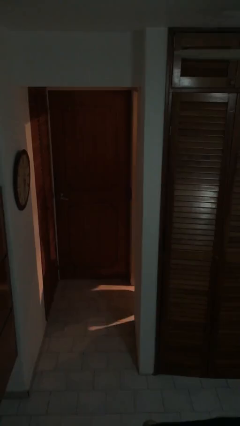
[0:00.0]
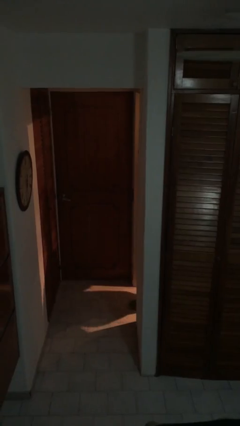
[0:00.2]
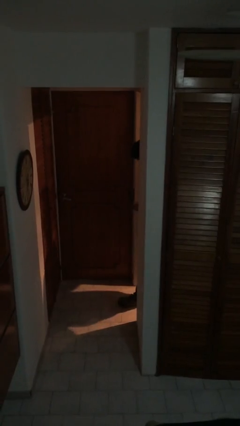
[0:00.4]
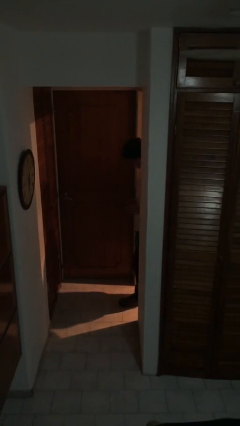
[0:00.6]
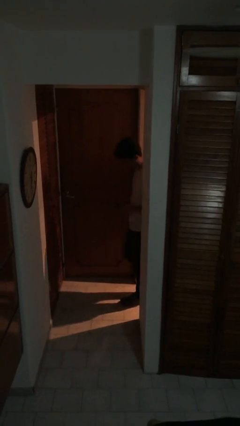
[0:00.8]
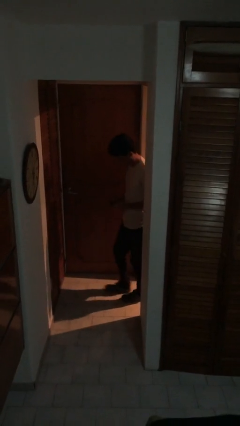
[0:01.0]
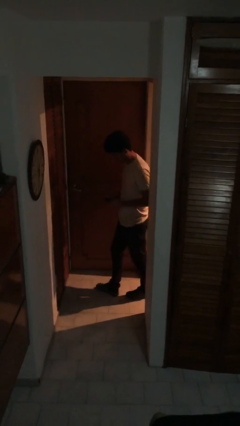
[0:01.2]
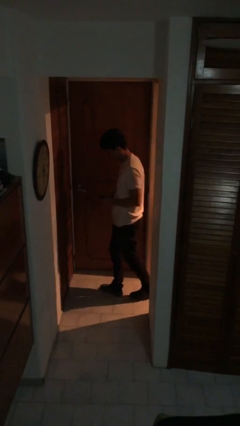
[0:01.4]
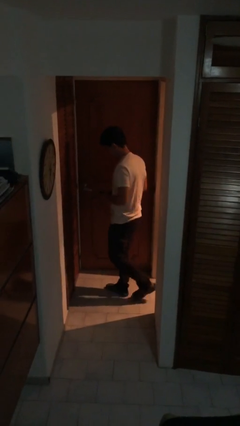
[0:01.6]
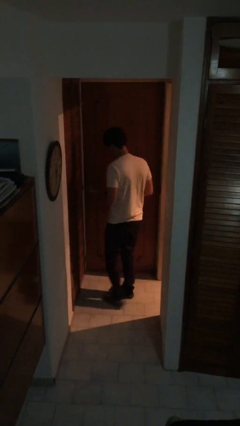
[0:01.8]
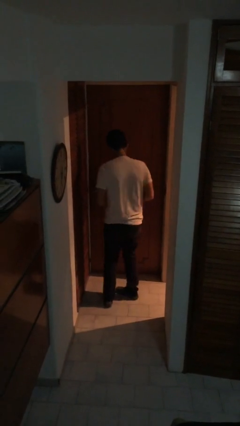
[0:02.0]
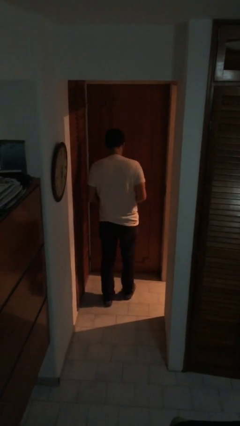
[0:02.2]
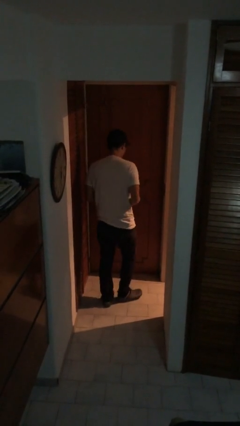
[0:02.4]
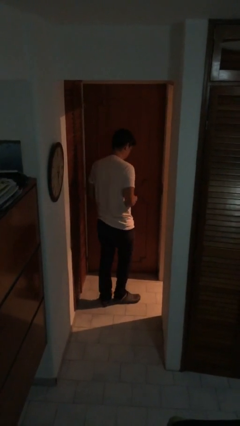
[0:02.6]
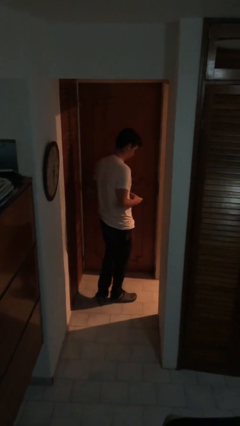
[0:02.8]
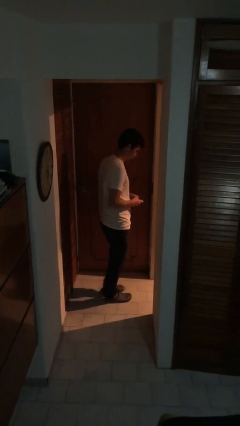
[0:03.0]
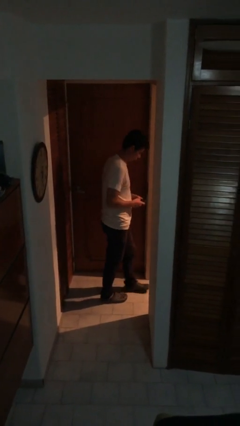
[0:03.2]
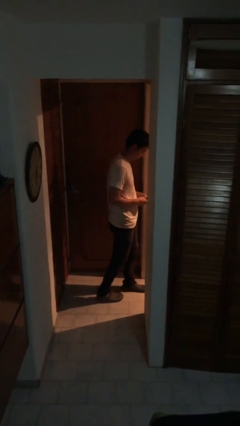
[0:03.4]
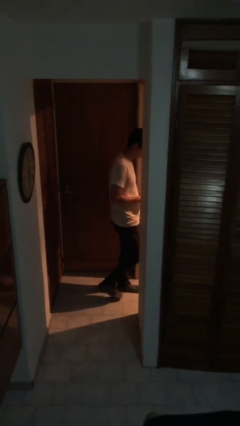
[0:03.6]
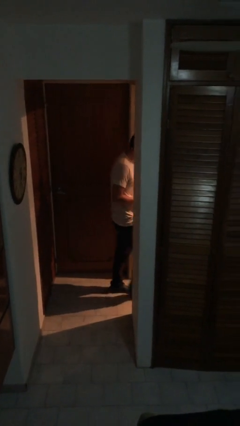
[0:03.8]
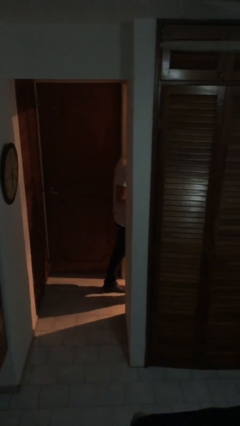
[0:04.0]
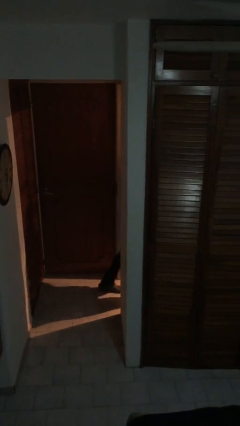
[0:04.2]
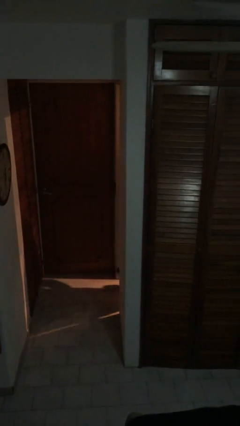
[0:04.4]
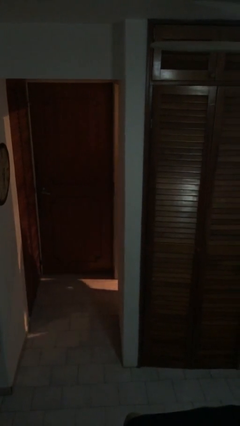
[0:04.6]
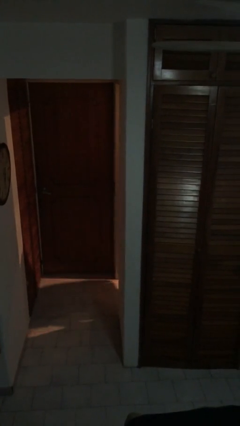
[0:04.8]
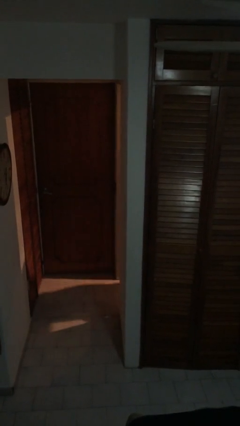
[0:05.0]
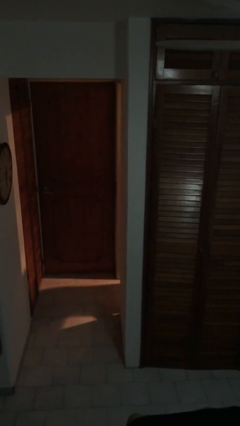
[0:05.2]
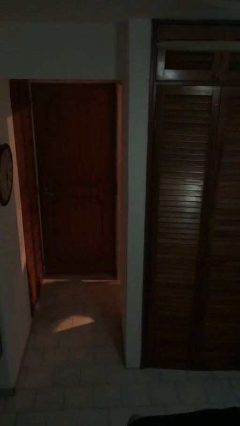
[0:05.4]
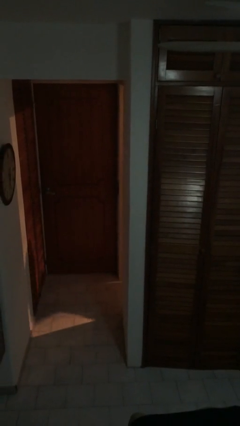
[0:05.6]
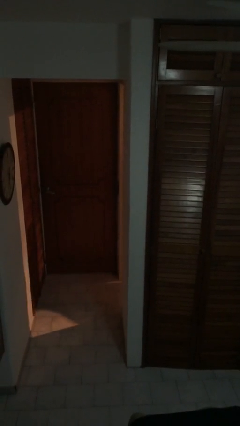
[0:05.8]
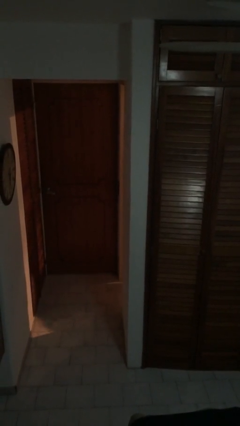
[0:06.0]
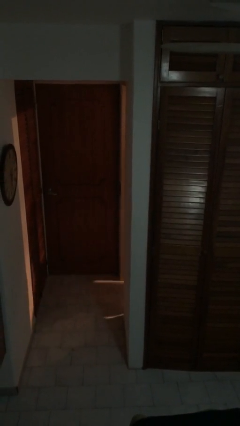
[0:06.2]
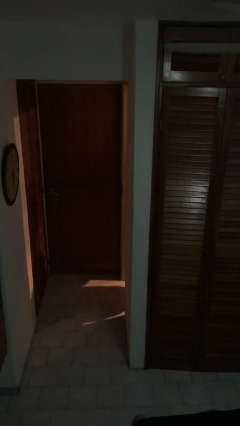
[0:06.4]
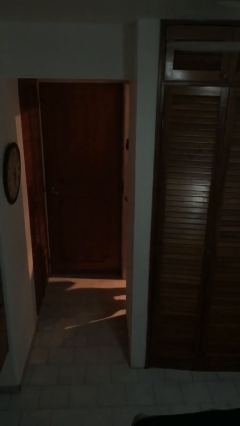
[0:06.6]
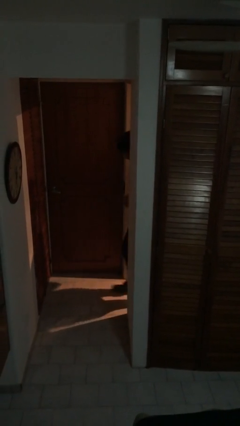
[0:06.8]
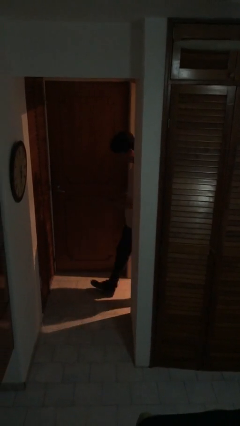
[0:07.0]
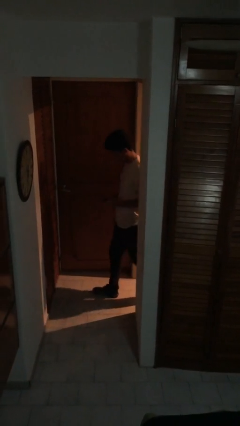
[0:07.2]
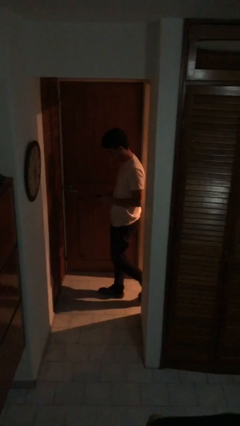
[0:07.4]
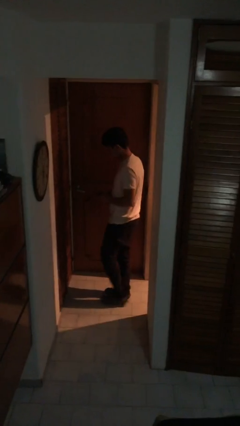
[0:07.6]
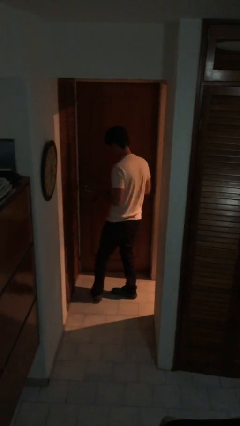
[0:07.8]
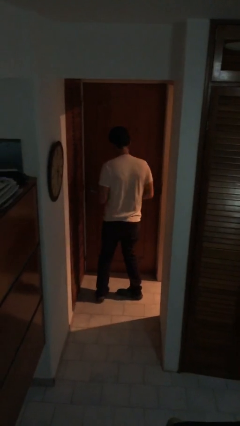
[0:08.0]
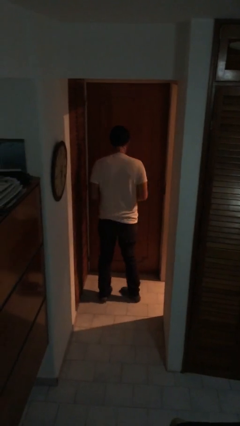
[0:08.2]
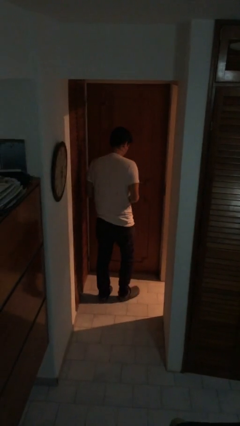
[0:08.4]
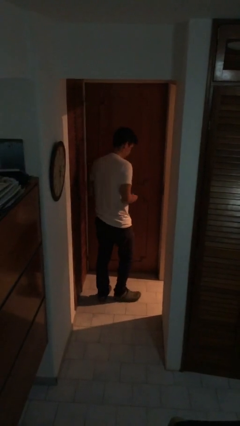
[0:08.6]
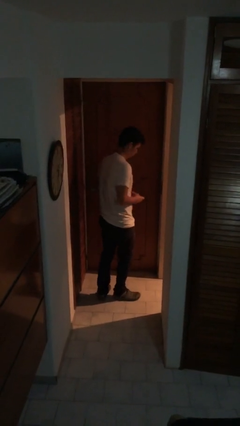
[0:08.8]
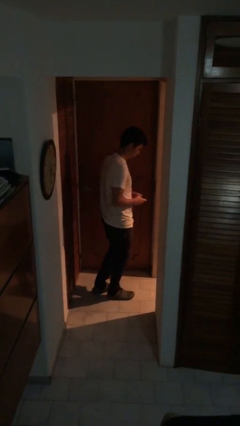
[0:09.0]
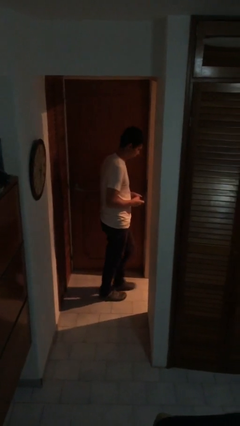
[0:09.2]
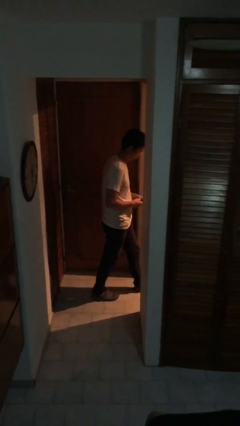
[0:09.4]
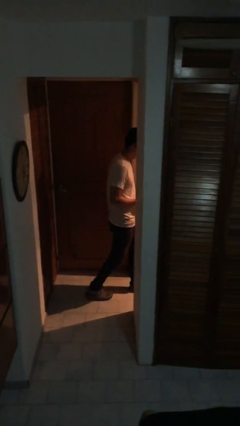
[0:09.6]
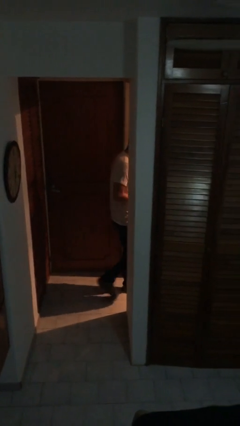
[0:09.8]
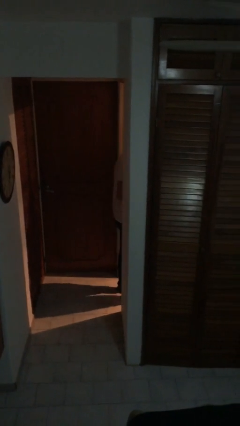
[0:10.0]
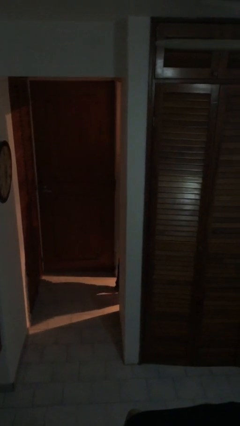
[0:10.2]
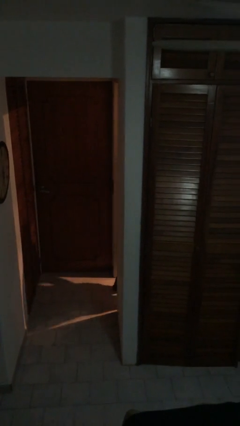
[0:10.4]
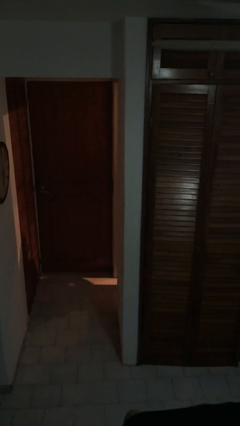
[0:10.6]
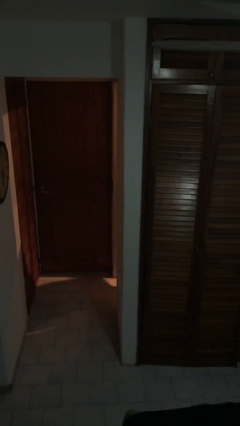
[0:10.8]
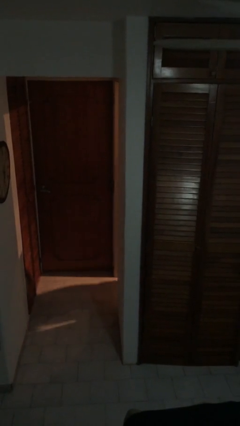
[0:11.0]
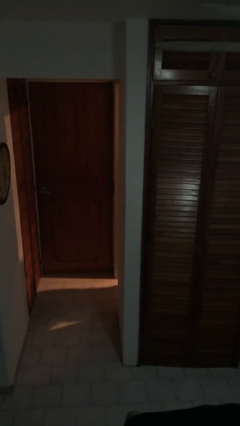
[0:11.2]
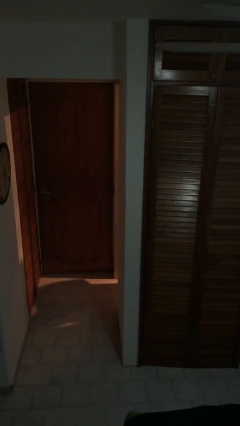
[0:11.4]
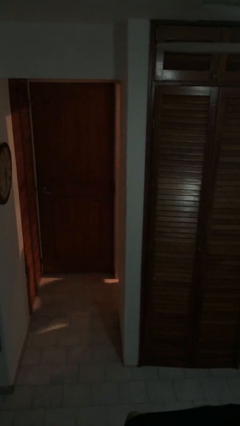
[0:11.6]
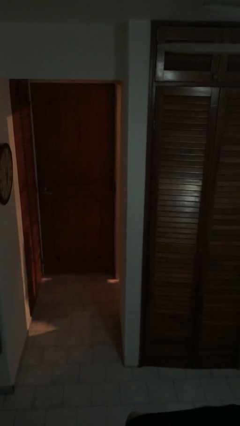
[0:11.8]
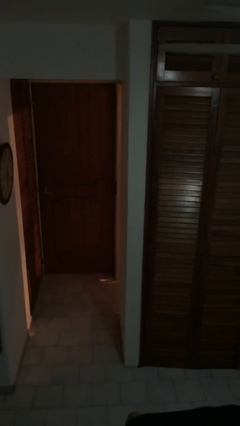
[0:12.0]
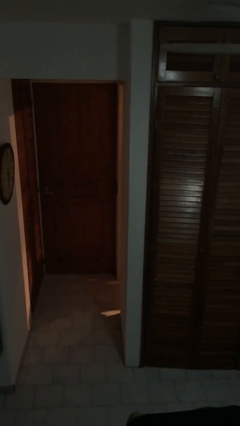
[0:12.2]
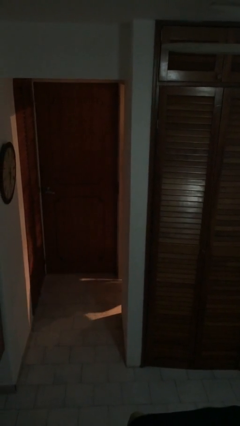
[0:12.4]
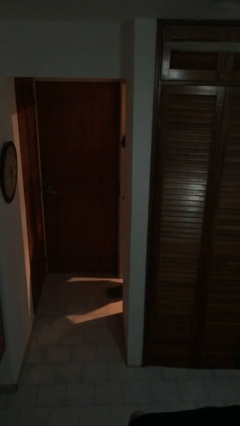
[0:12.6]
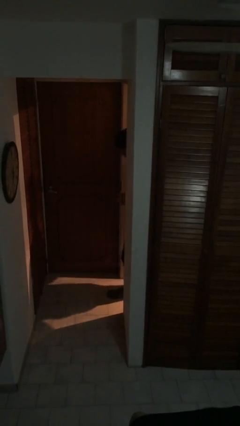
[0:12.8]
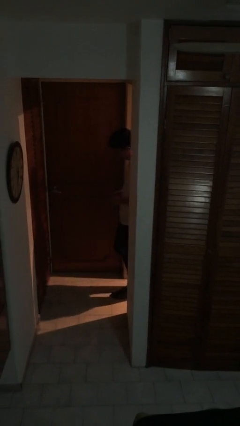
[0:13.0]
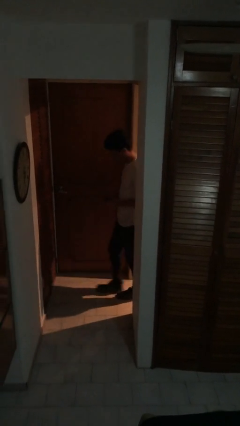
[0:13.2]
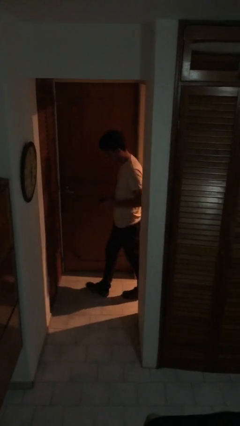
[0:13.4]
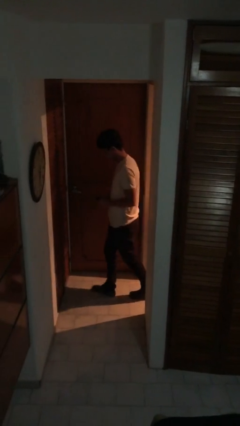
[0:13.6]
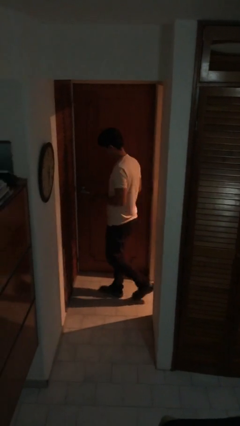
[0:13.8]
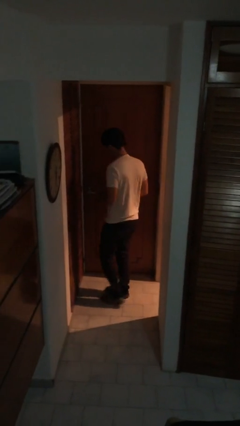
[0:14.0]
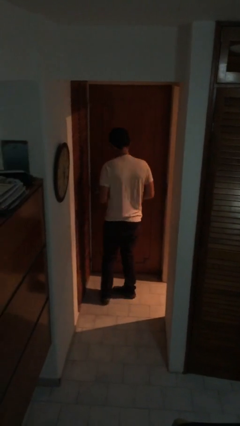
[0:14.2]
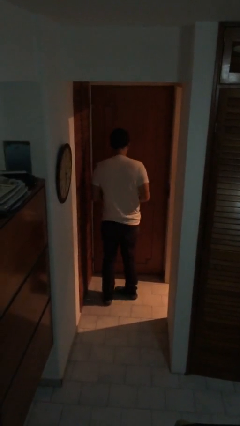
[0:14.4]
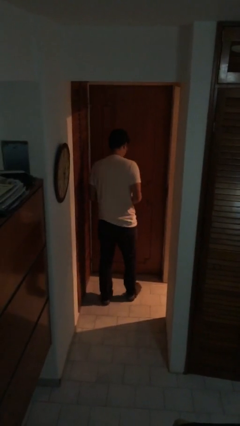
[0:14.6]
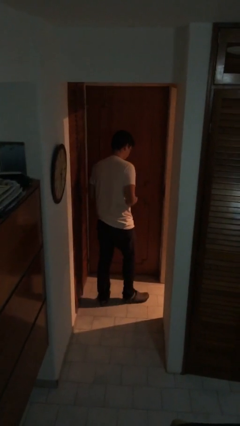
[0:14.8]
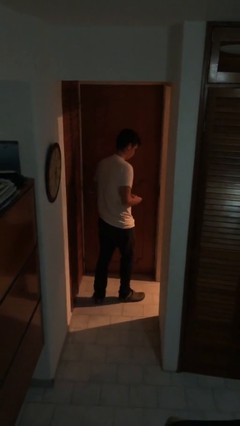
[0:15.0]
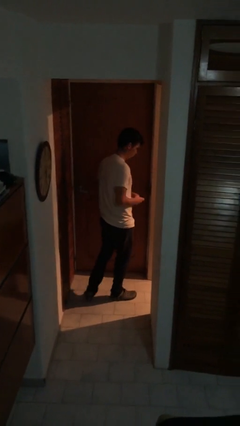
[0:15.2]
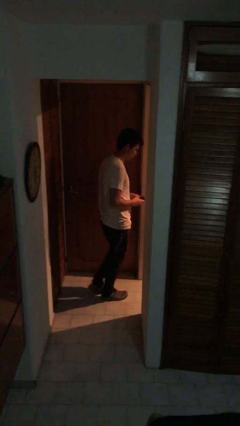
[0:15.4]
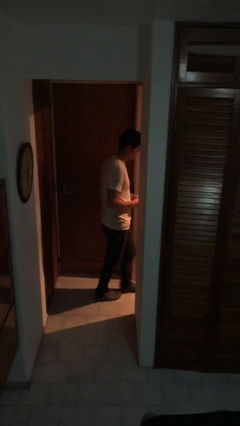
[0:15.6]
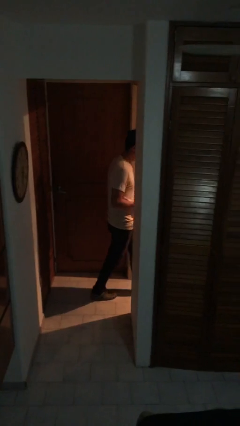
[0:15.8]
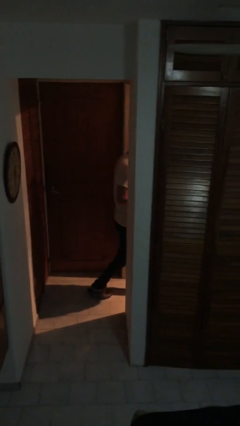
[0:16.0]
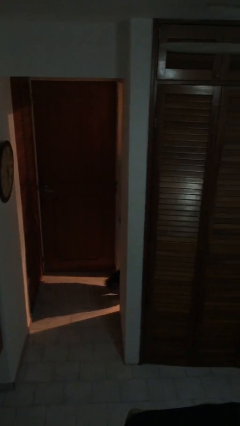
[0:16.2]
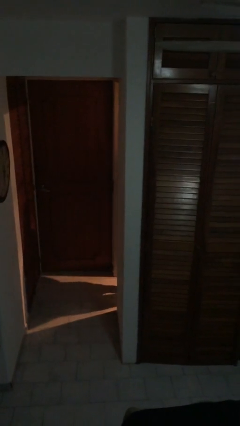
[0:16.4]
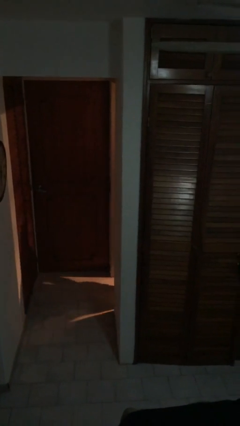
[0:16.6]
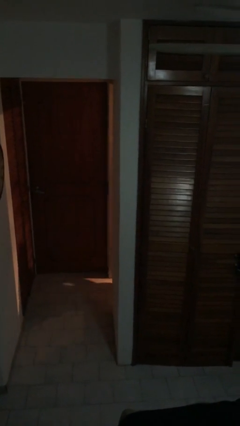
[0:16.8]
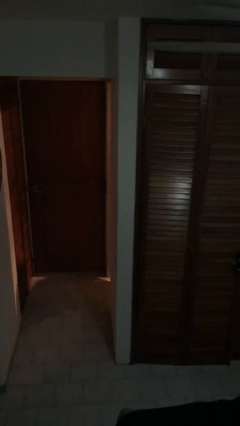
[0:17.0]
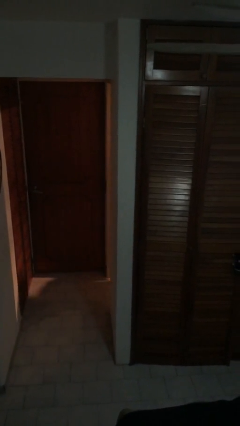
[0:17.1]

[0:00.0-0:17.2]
person texts on phone

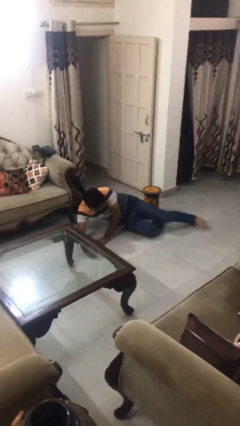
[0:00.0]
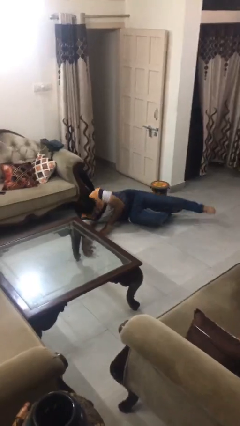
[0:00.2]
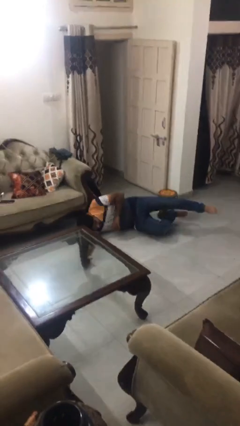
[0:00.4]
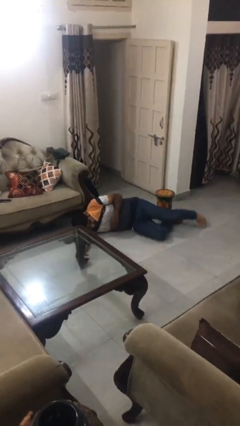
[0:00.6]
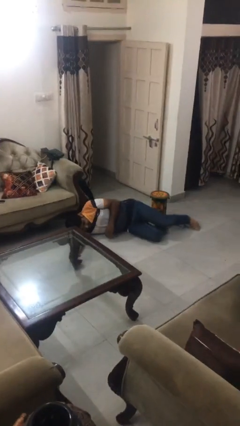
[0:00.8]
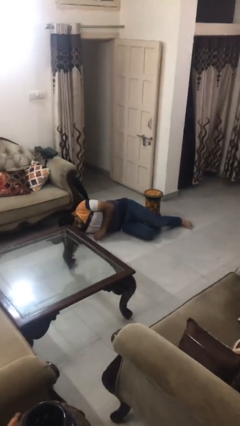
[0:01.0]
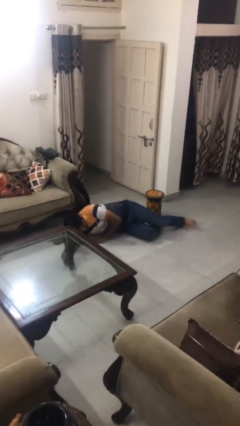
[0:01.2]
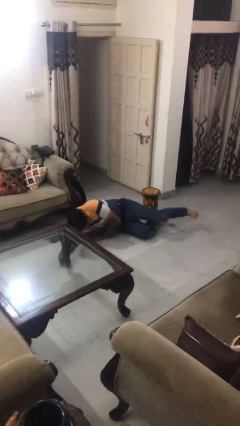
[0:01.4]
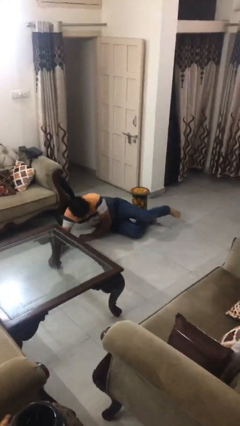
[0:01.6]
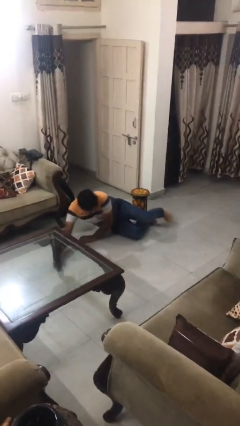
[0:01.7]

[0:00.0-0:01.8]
person lies down on floor
